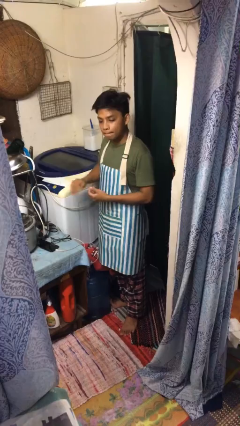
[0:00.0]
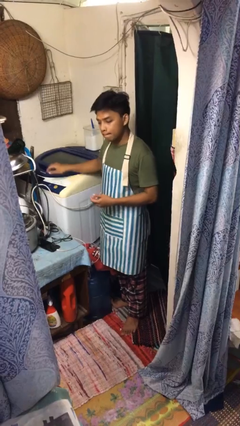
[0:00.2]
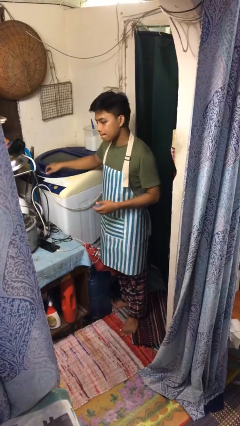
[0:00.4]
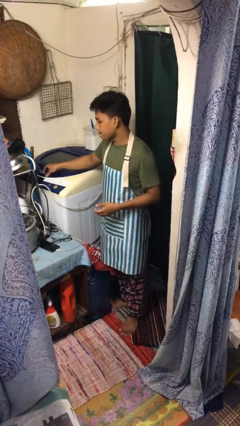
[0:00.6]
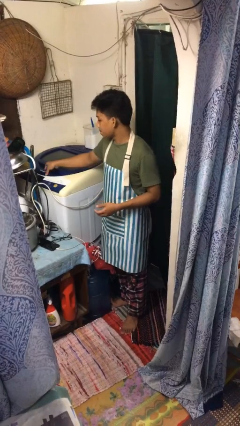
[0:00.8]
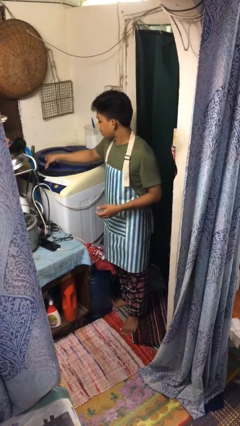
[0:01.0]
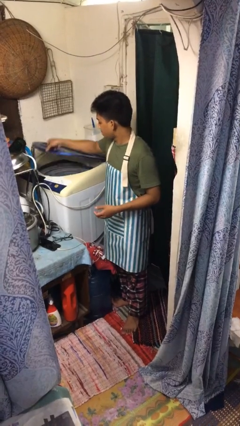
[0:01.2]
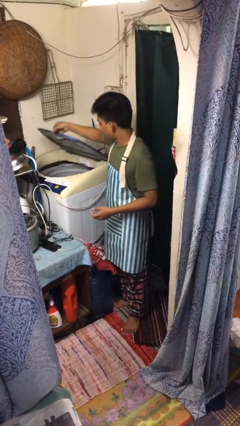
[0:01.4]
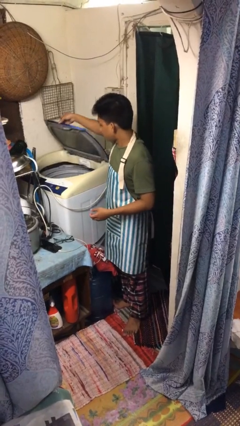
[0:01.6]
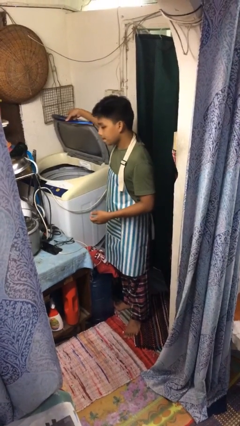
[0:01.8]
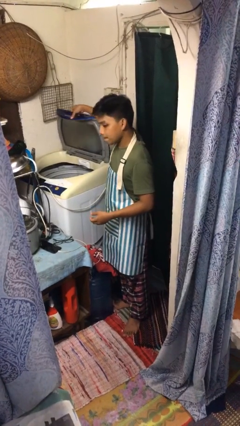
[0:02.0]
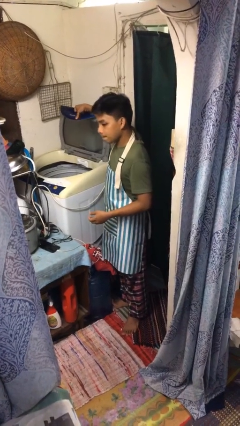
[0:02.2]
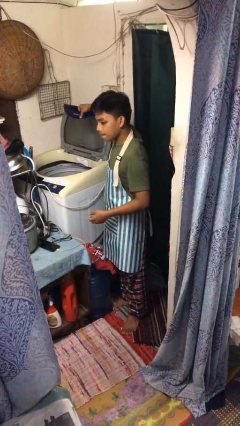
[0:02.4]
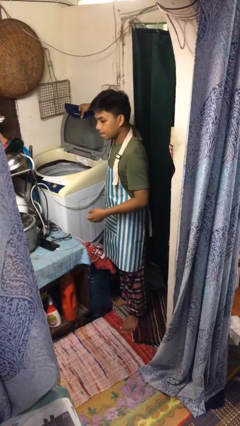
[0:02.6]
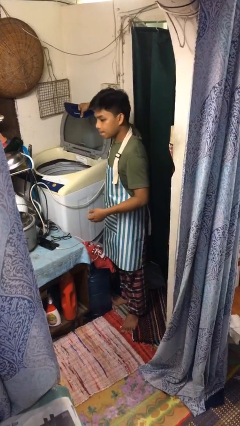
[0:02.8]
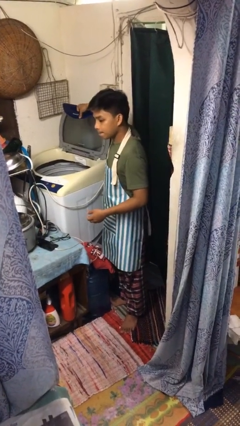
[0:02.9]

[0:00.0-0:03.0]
person opens clothes washer

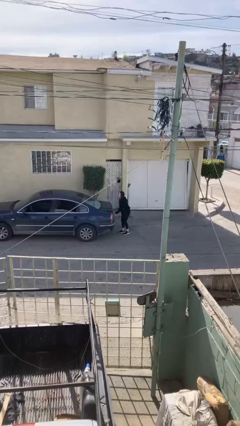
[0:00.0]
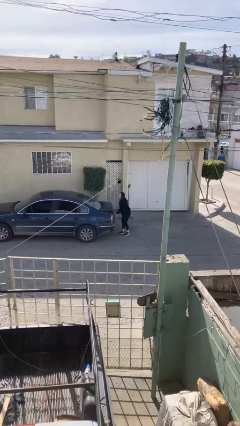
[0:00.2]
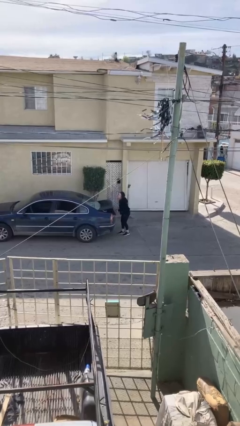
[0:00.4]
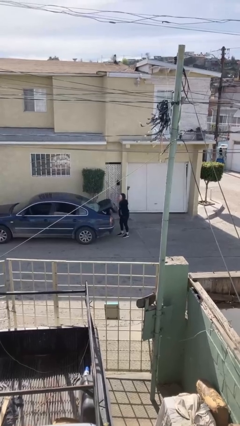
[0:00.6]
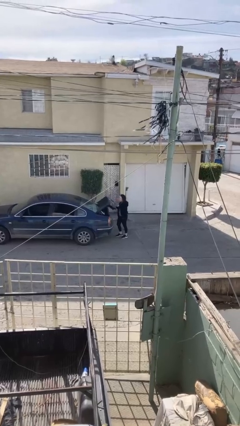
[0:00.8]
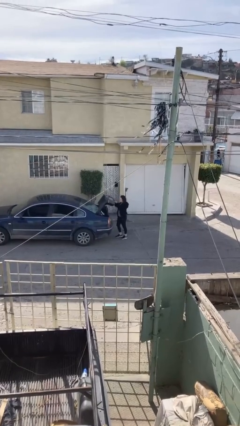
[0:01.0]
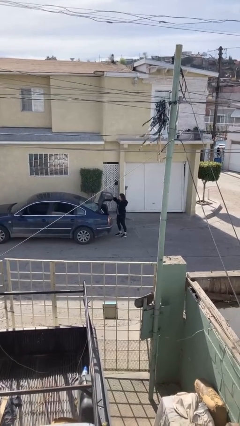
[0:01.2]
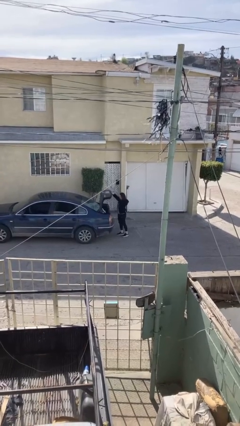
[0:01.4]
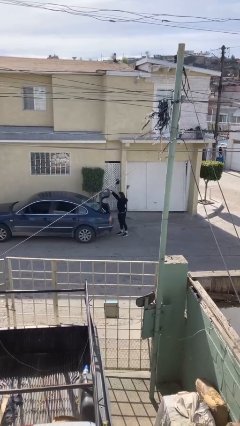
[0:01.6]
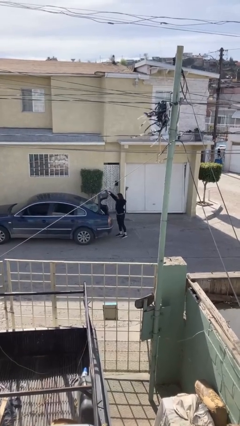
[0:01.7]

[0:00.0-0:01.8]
person opens car trunk

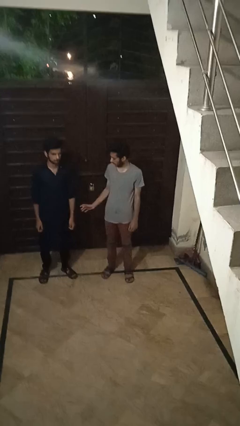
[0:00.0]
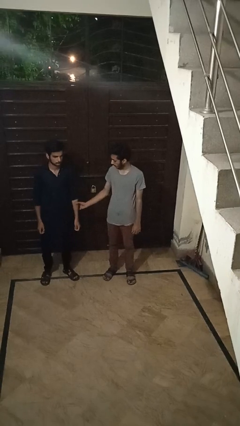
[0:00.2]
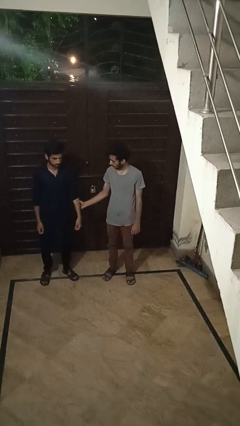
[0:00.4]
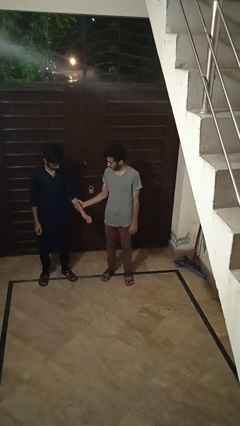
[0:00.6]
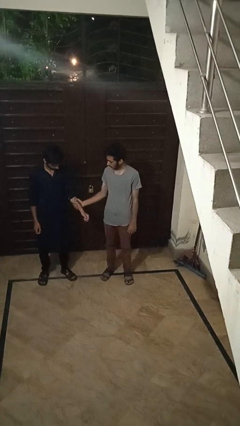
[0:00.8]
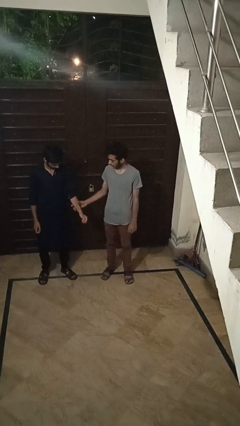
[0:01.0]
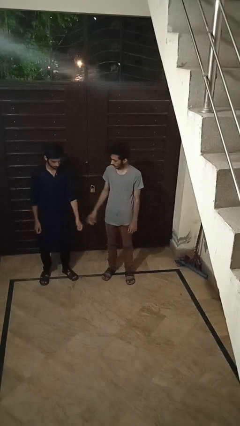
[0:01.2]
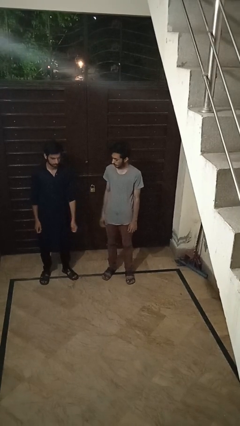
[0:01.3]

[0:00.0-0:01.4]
person grabs person by forearm

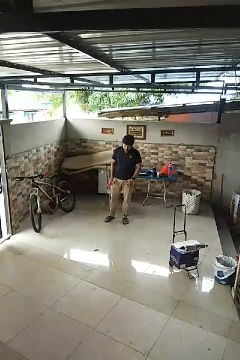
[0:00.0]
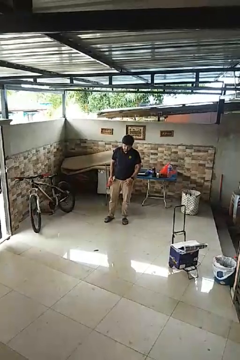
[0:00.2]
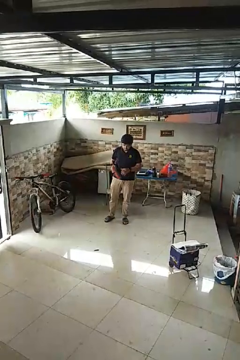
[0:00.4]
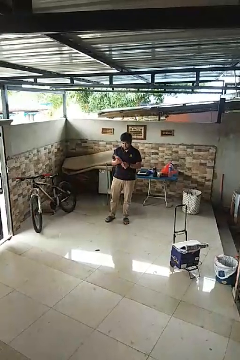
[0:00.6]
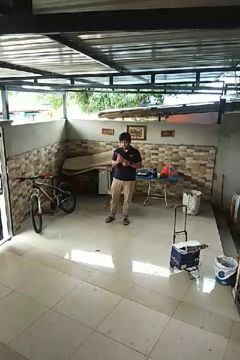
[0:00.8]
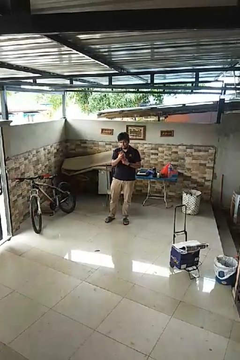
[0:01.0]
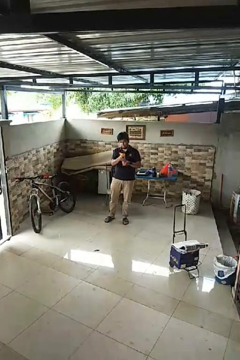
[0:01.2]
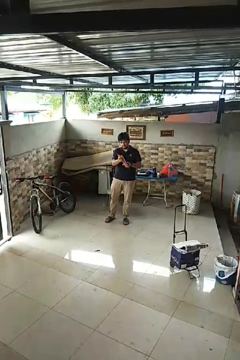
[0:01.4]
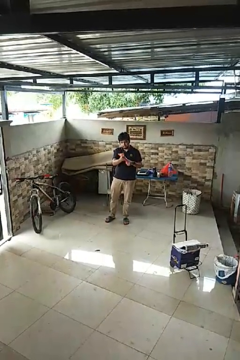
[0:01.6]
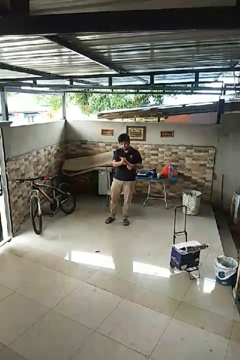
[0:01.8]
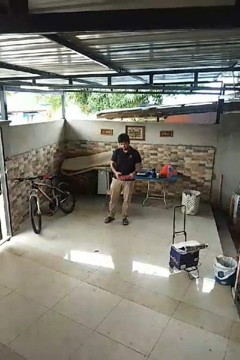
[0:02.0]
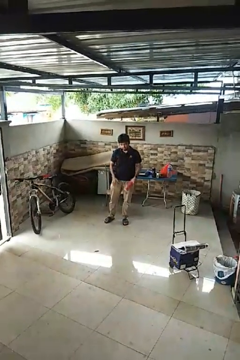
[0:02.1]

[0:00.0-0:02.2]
person squeezes object

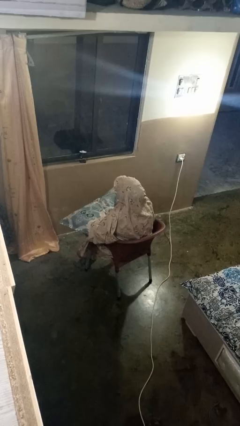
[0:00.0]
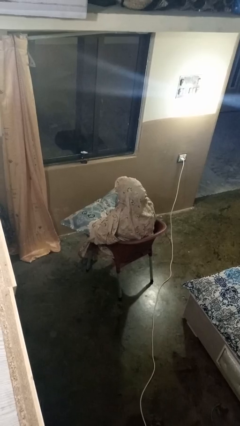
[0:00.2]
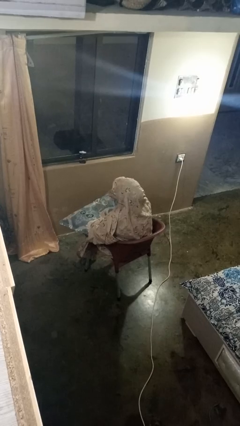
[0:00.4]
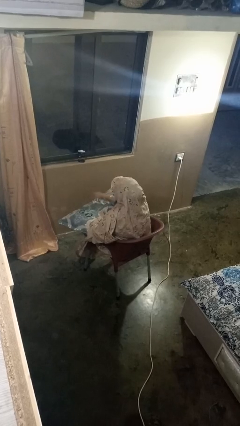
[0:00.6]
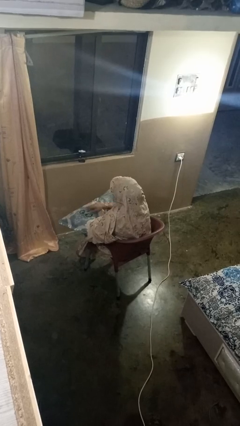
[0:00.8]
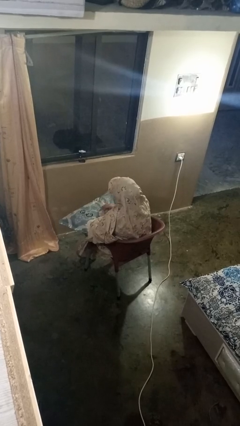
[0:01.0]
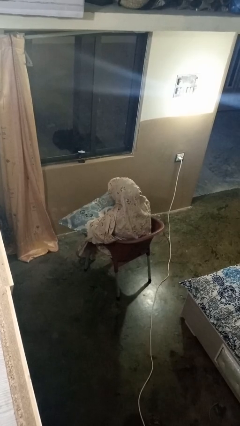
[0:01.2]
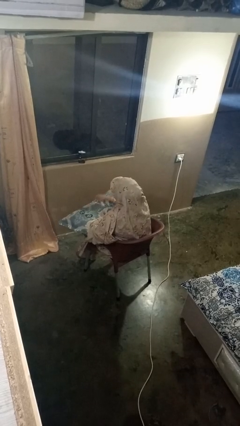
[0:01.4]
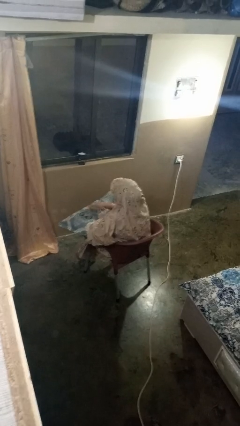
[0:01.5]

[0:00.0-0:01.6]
person waves hand over object

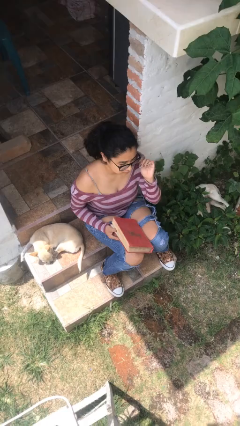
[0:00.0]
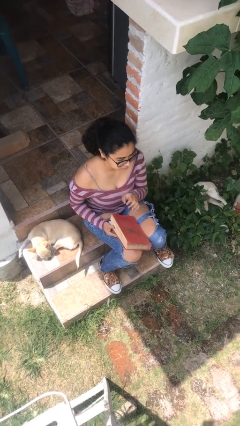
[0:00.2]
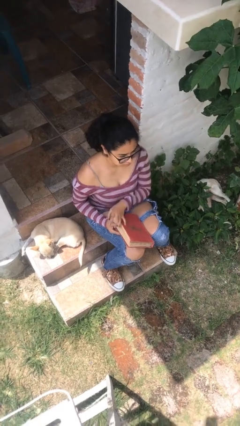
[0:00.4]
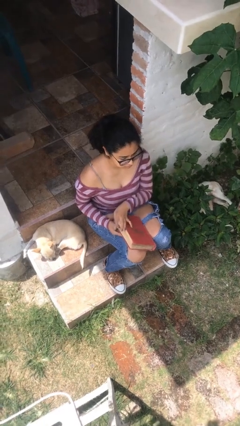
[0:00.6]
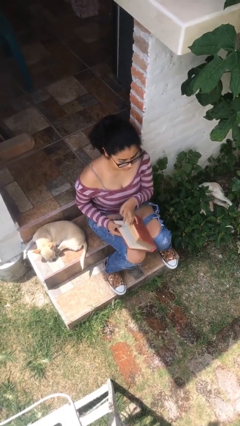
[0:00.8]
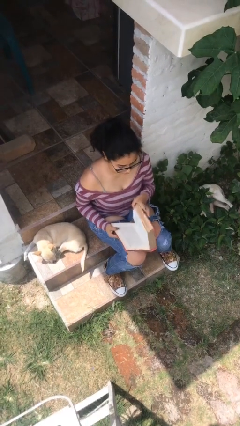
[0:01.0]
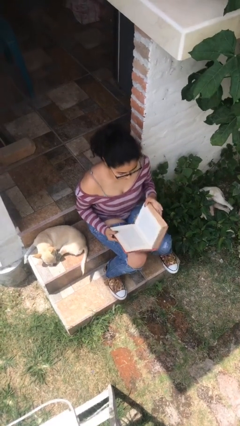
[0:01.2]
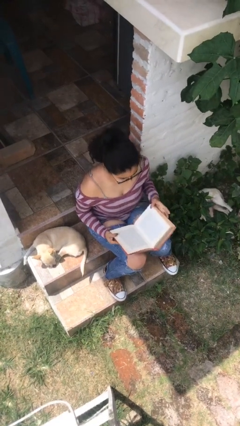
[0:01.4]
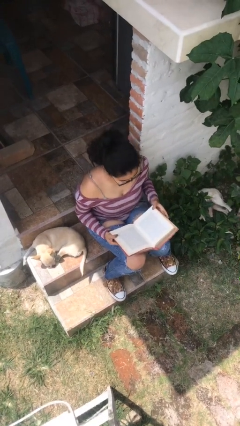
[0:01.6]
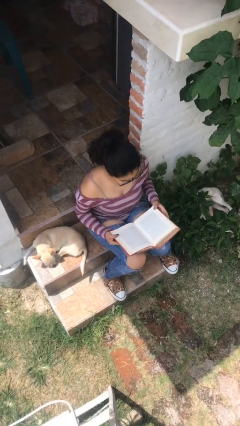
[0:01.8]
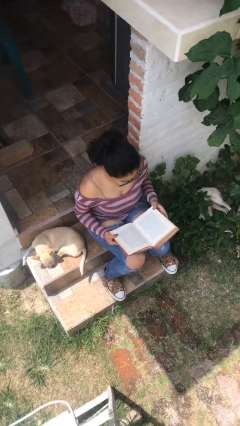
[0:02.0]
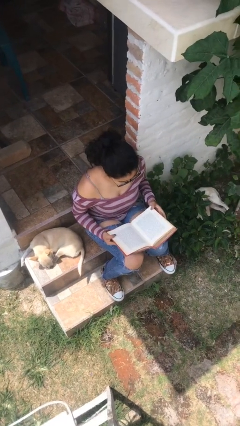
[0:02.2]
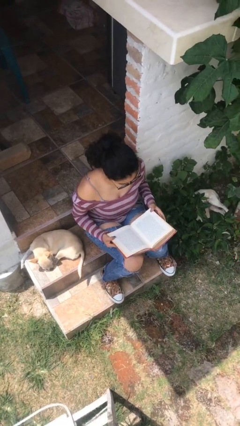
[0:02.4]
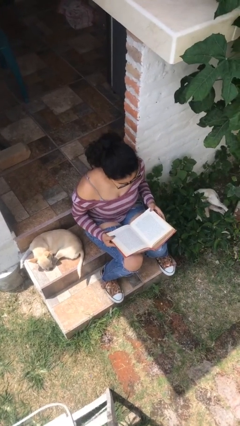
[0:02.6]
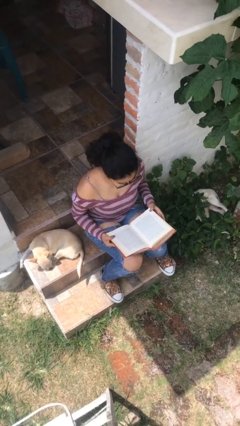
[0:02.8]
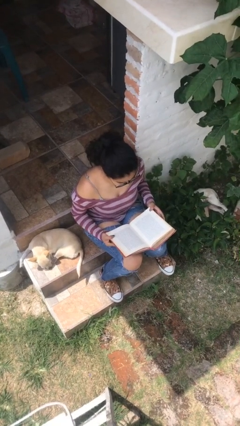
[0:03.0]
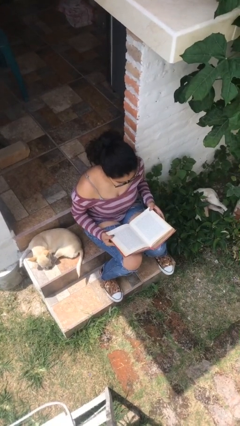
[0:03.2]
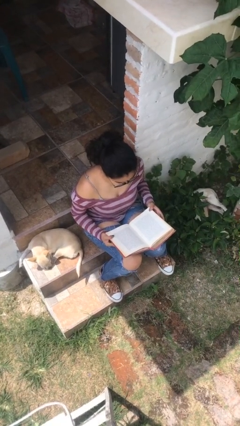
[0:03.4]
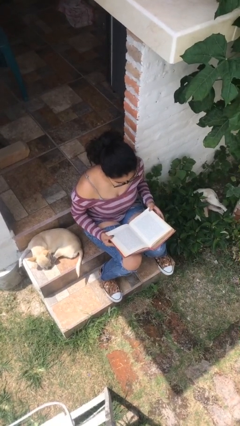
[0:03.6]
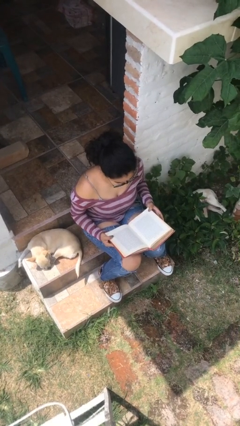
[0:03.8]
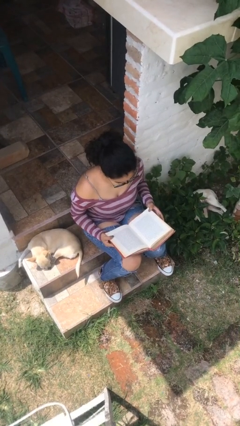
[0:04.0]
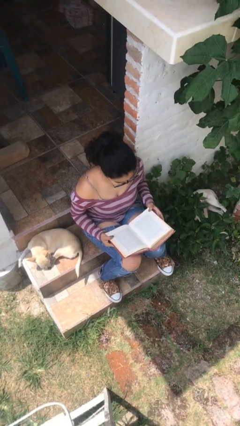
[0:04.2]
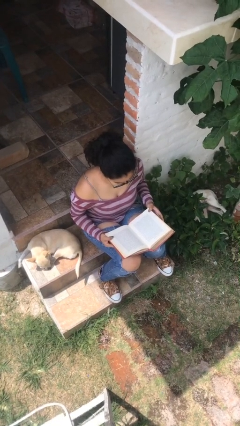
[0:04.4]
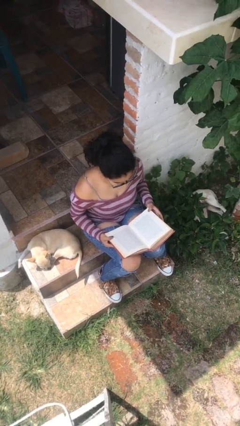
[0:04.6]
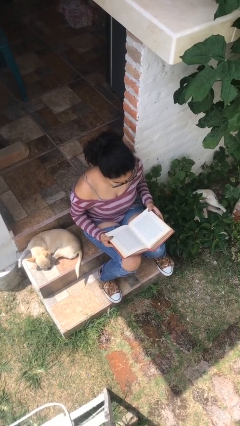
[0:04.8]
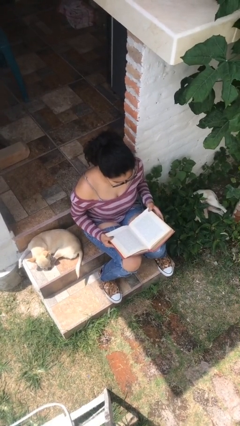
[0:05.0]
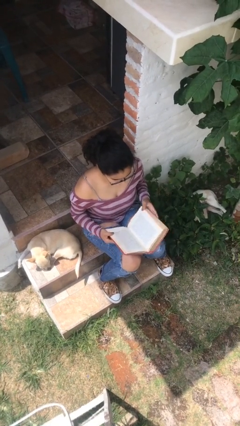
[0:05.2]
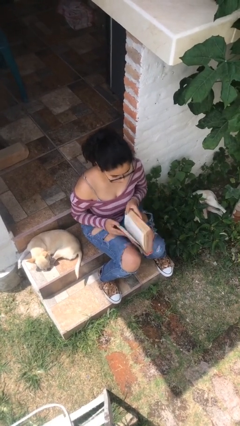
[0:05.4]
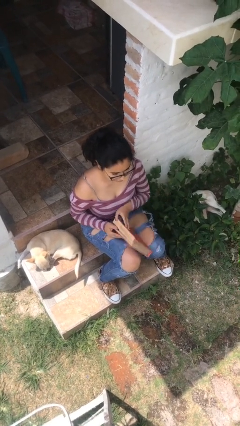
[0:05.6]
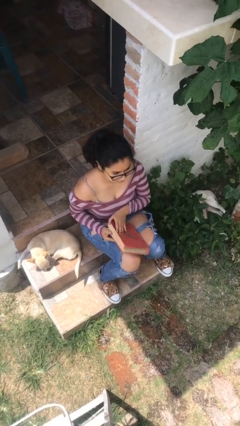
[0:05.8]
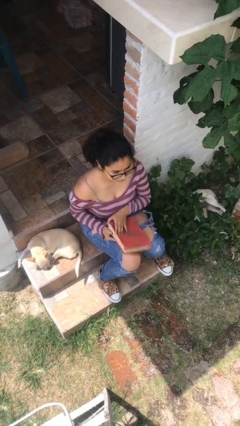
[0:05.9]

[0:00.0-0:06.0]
person reads book

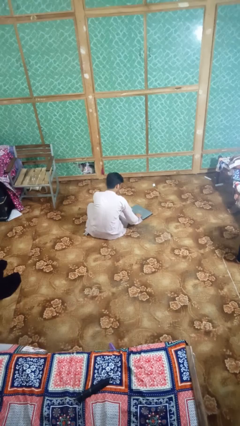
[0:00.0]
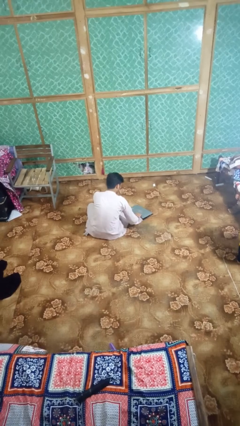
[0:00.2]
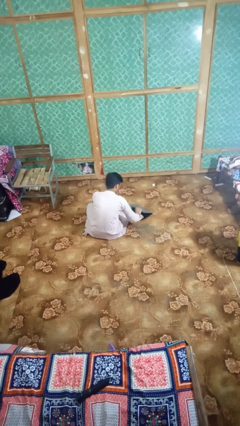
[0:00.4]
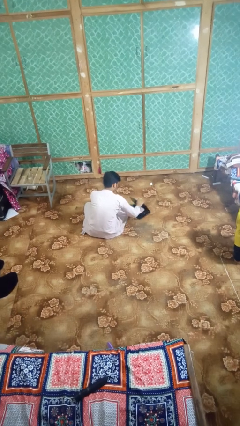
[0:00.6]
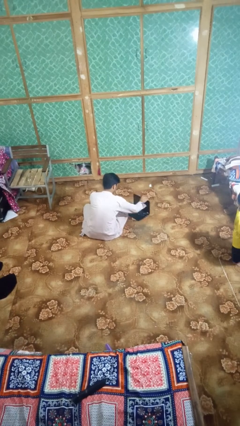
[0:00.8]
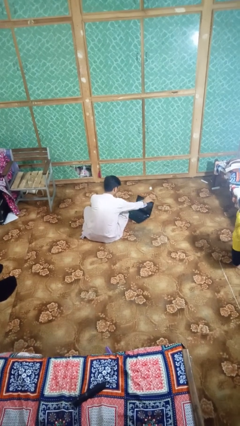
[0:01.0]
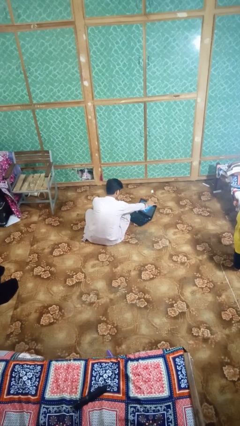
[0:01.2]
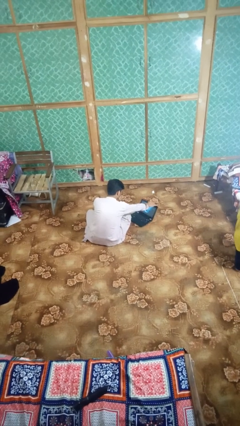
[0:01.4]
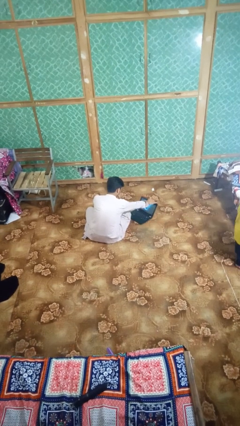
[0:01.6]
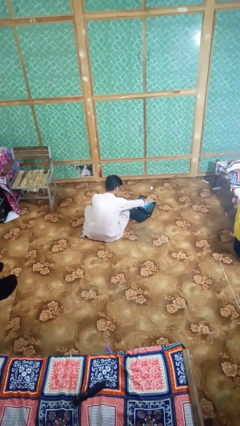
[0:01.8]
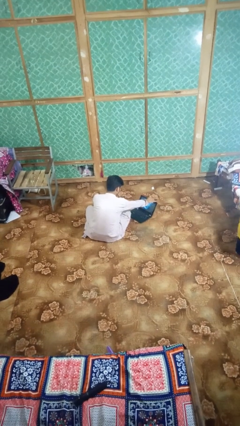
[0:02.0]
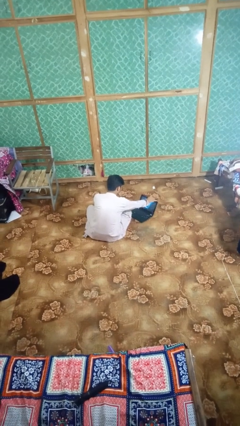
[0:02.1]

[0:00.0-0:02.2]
person opens laptop
